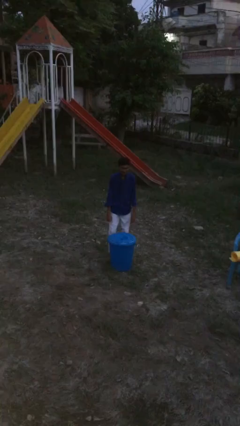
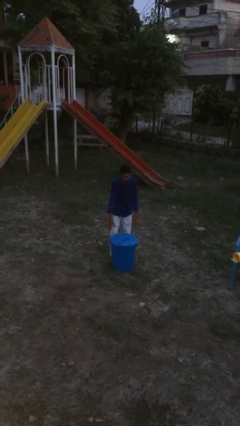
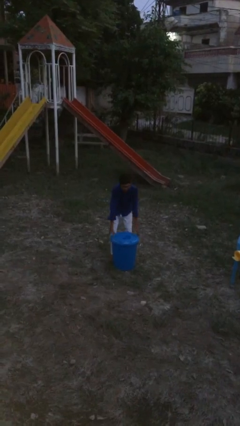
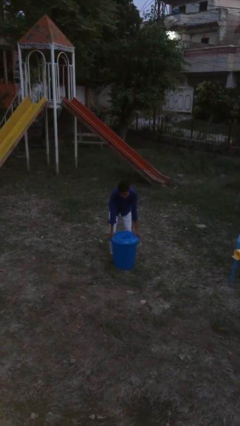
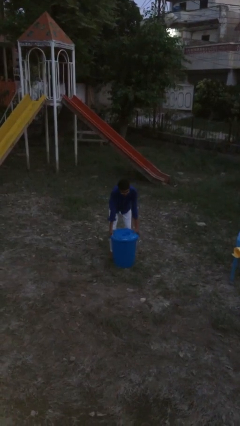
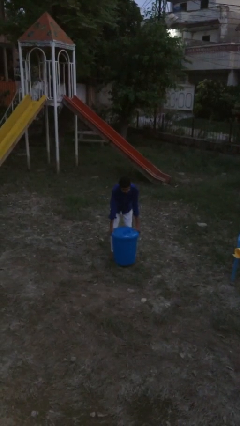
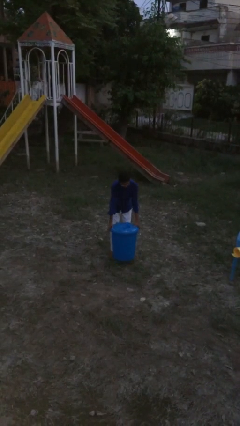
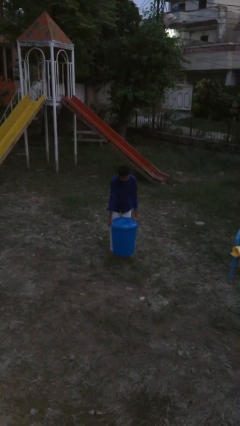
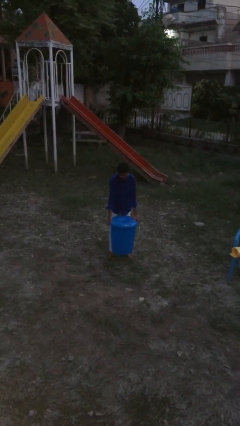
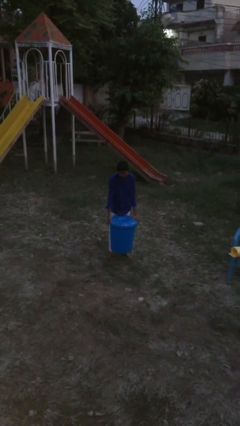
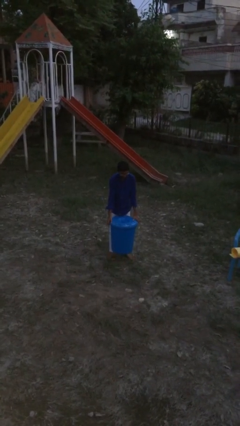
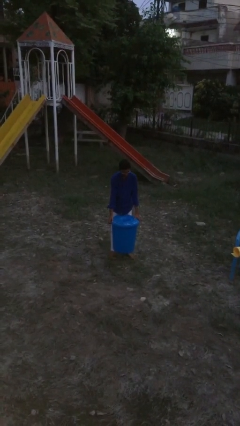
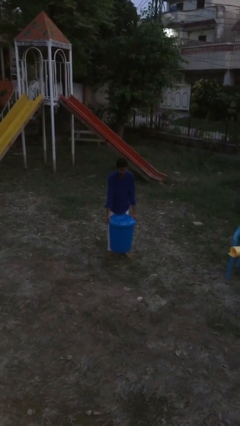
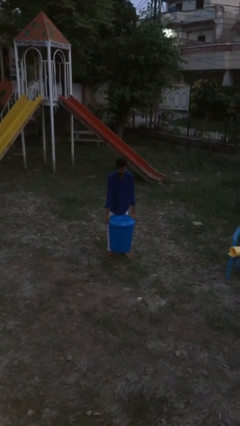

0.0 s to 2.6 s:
person picks up object from floor

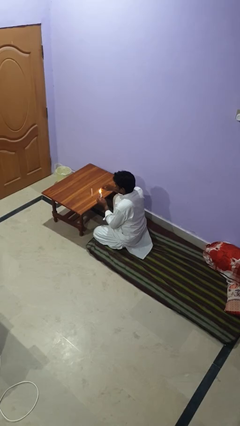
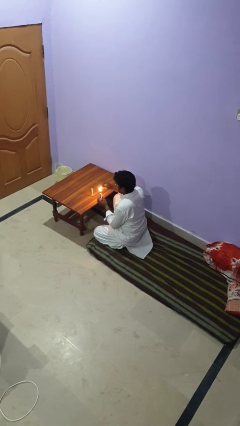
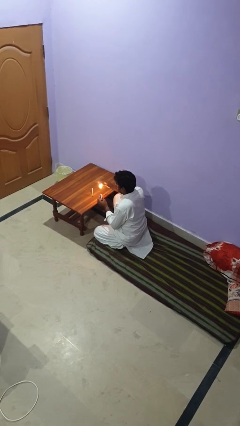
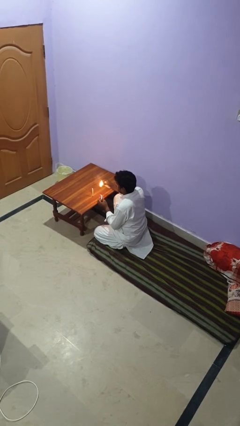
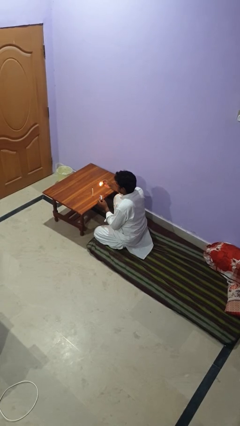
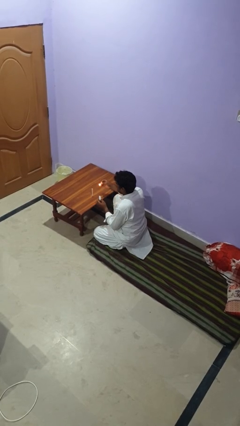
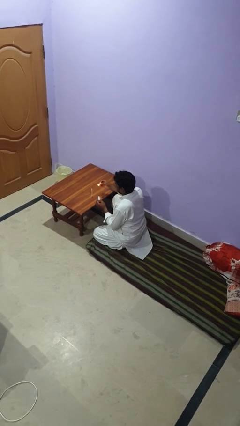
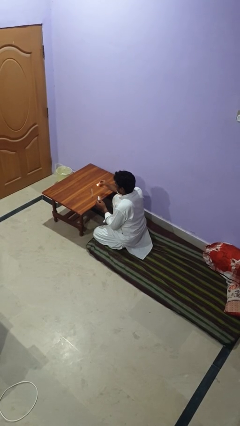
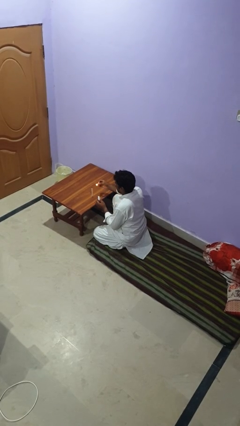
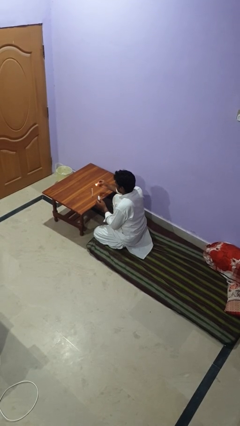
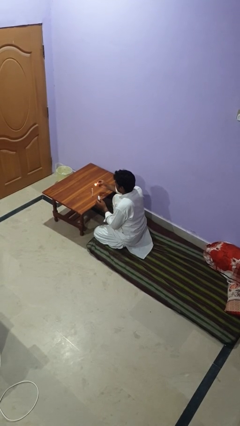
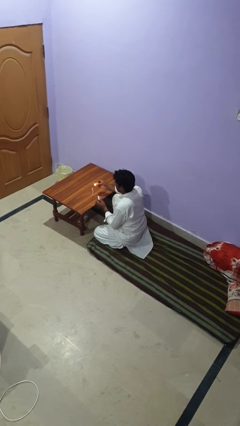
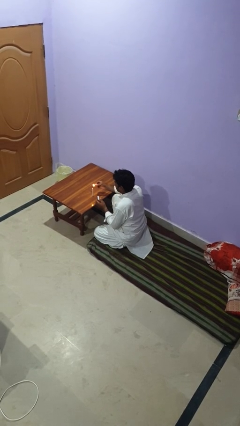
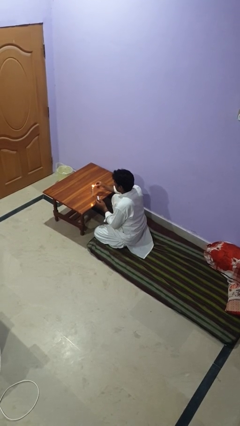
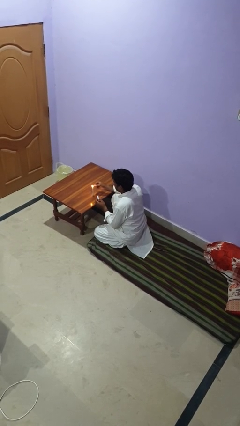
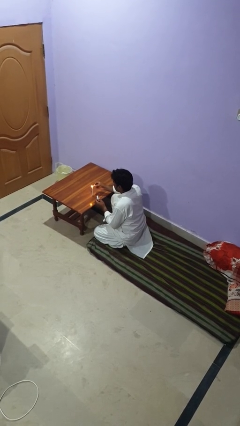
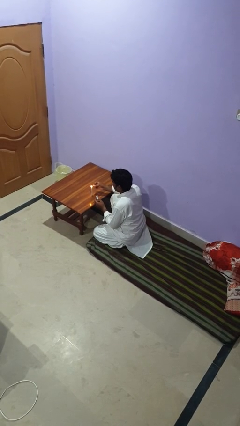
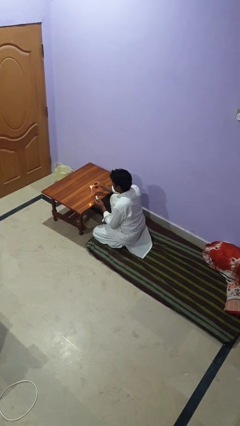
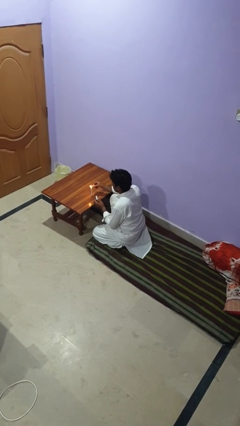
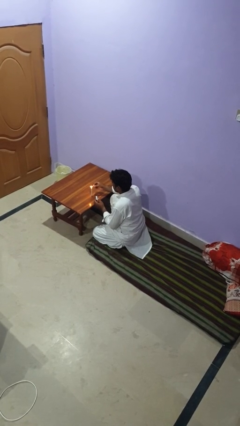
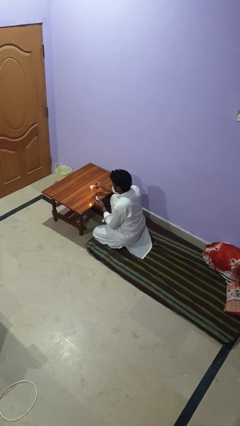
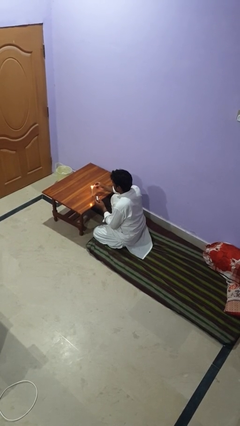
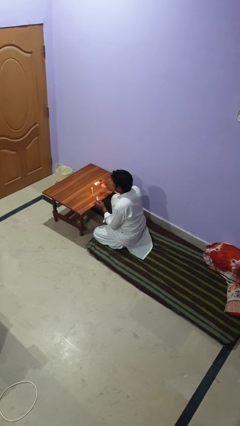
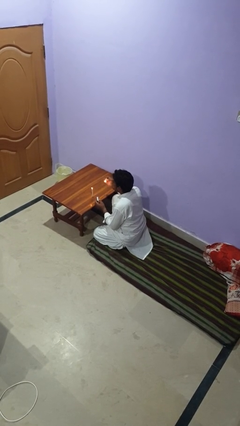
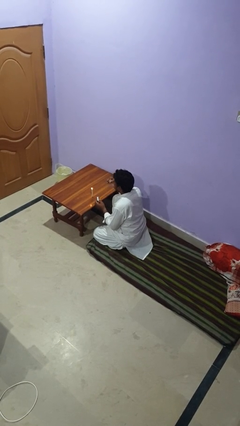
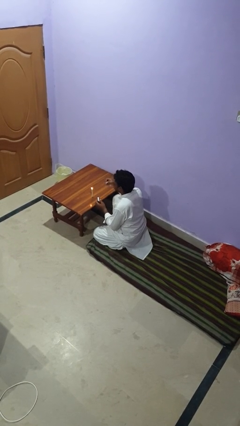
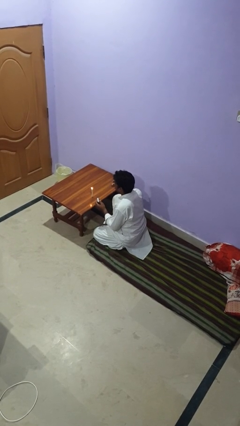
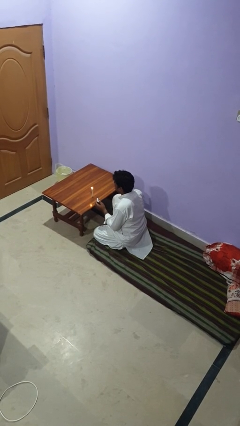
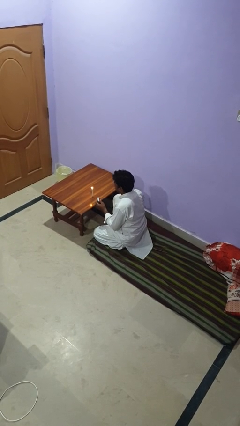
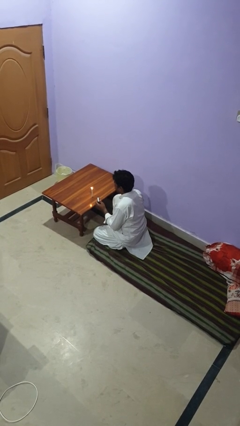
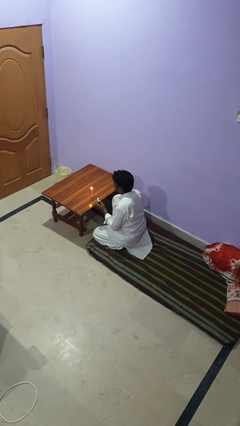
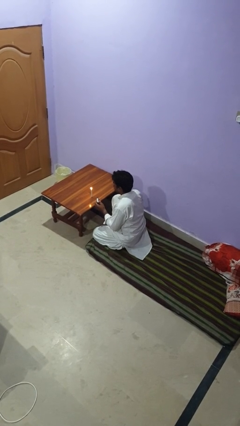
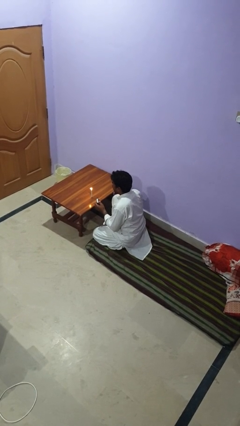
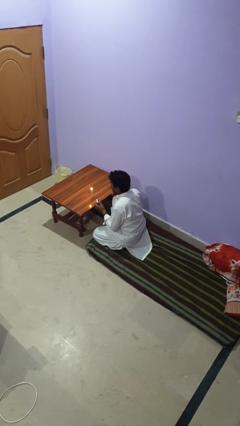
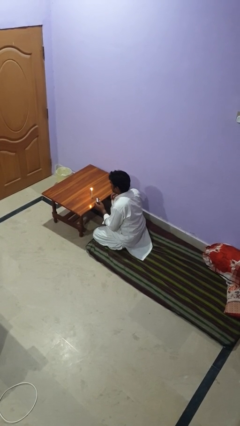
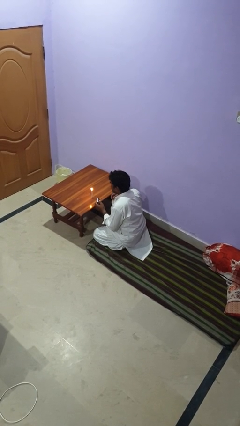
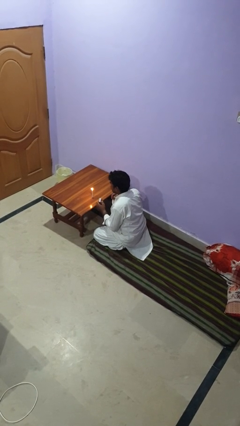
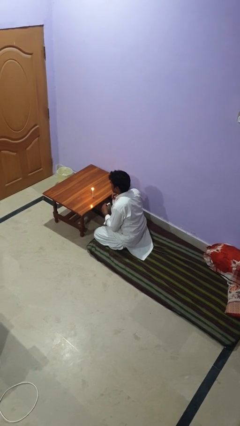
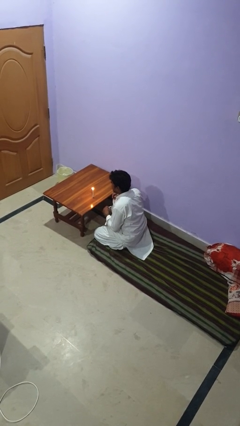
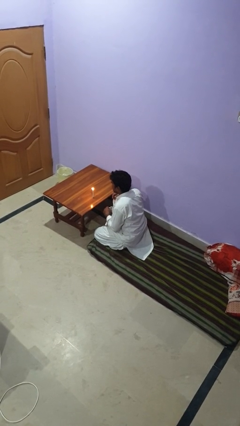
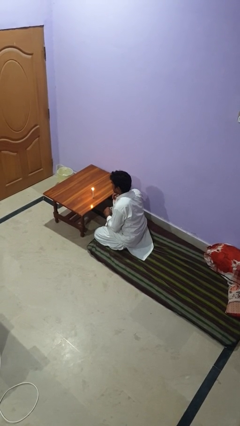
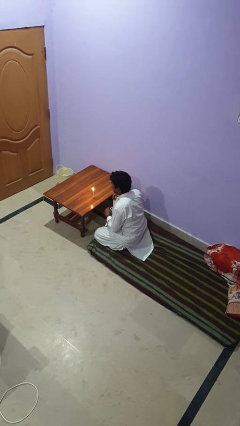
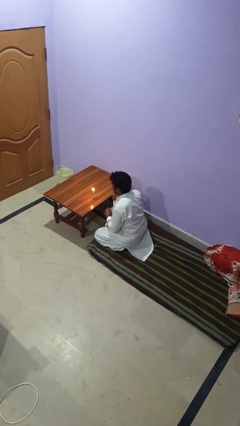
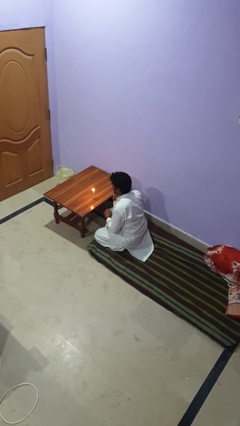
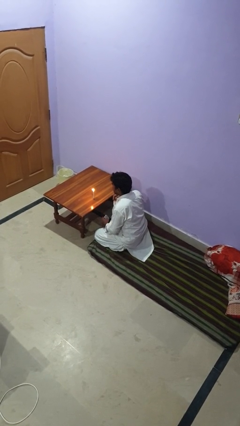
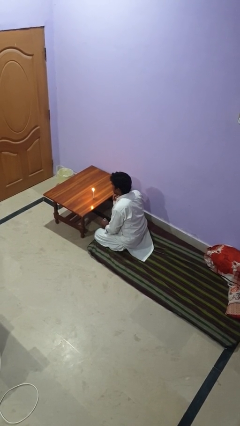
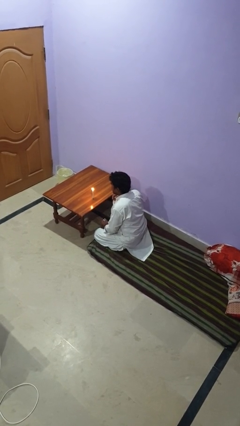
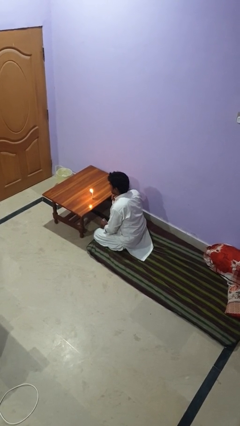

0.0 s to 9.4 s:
person lights candle

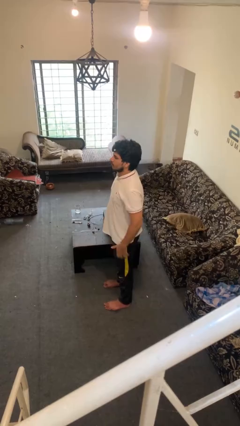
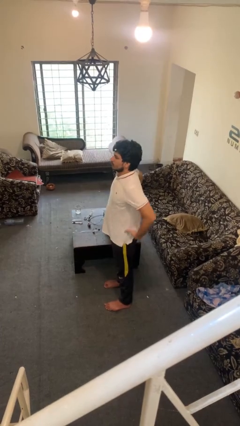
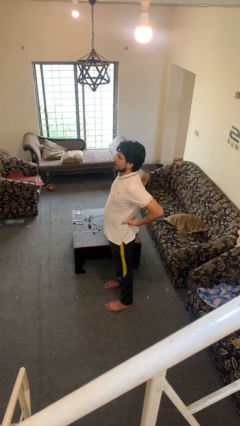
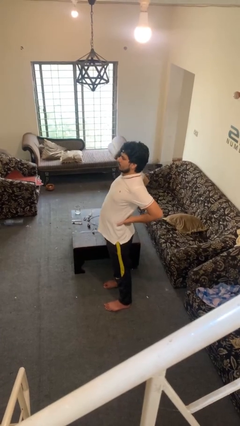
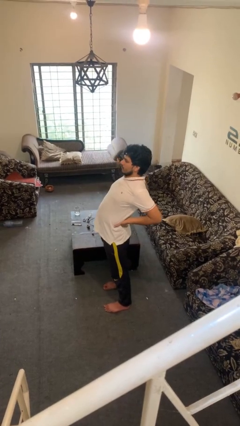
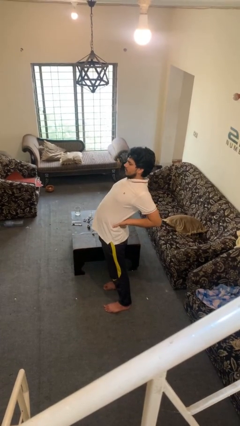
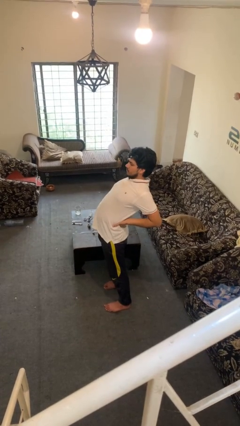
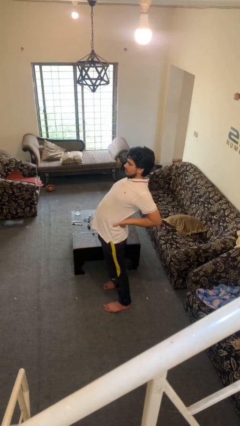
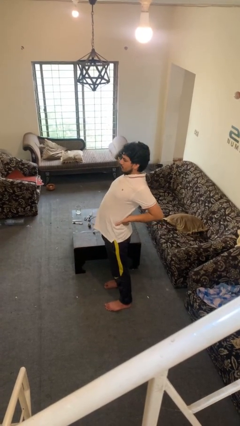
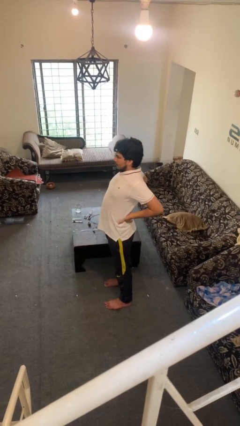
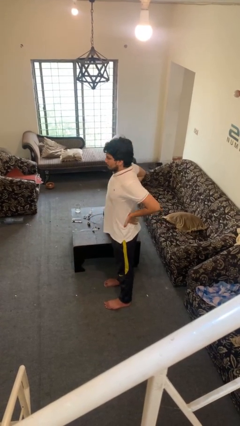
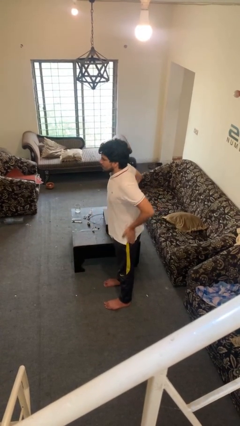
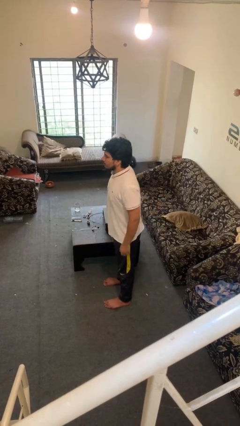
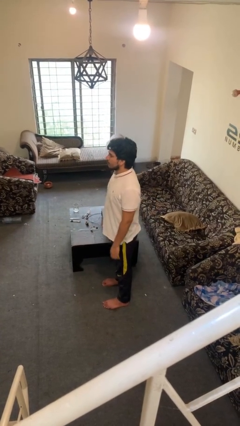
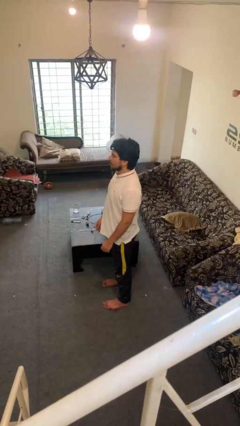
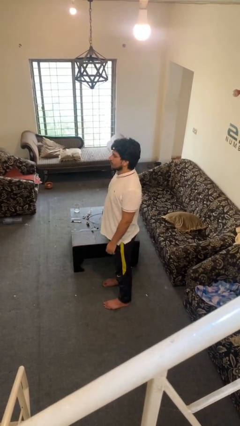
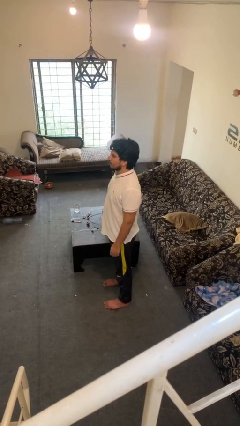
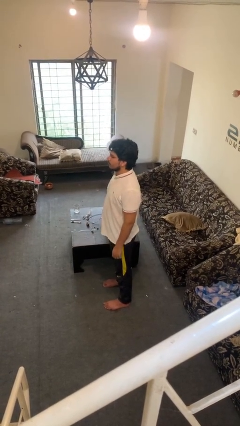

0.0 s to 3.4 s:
person stretches back

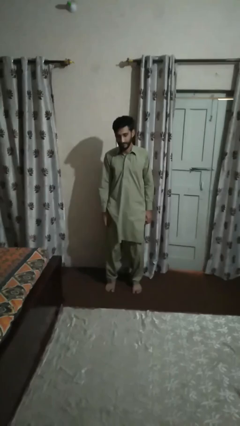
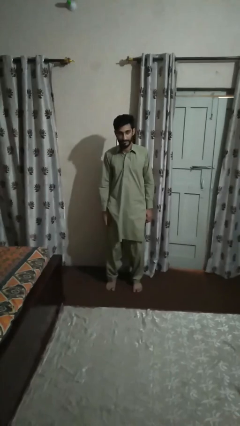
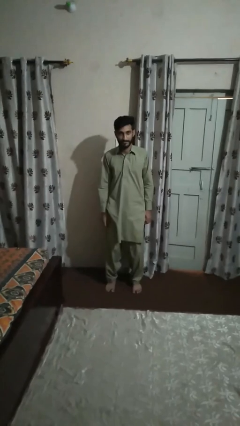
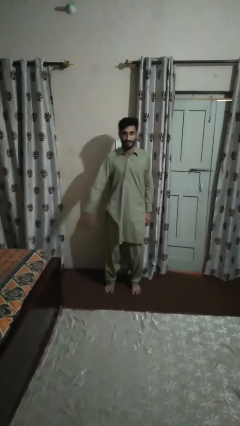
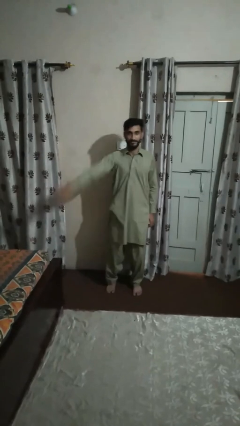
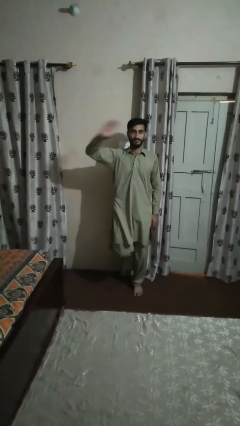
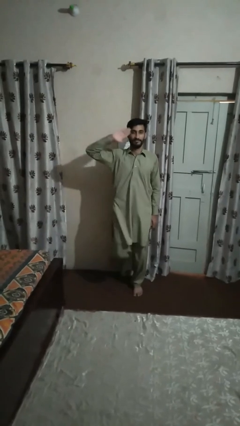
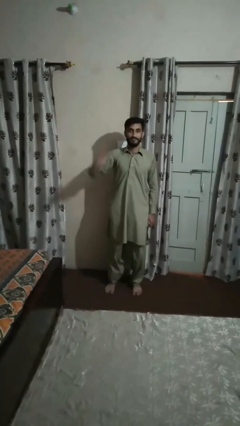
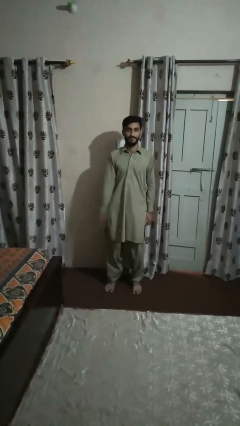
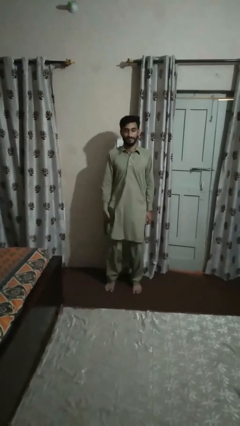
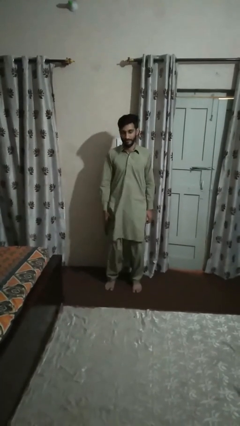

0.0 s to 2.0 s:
person salutes

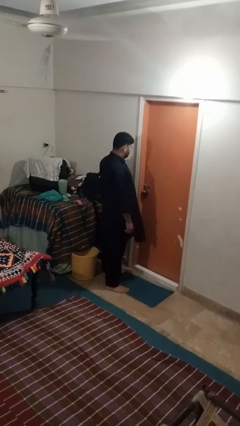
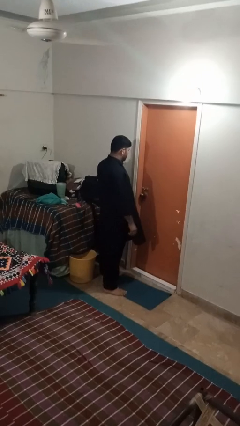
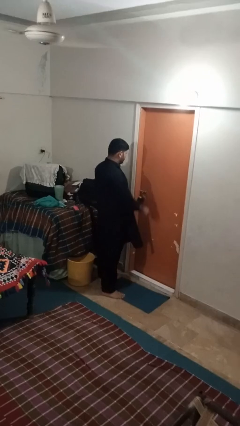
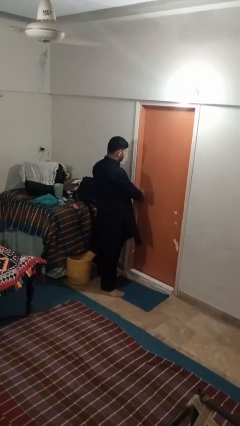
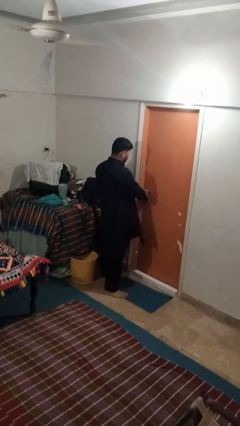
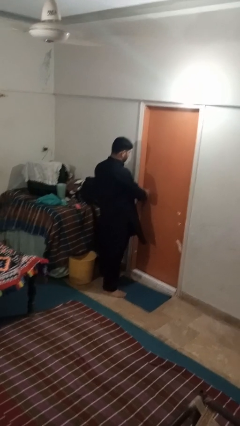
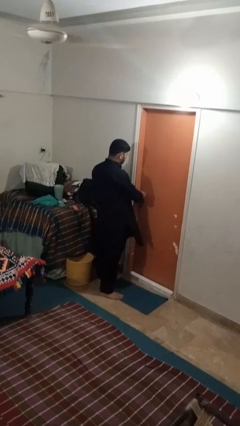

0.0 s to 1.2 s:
person unlocks door with keys
